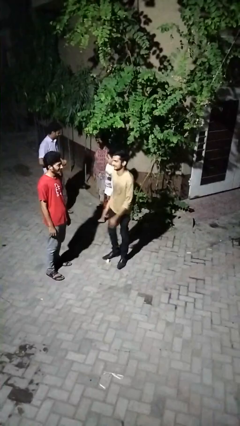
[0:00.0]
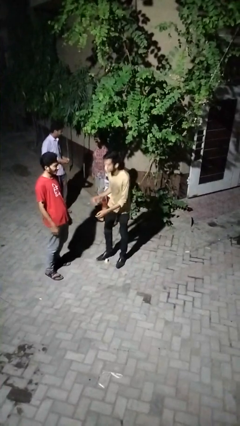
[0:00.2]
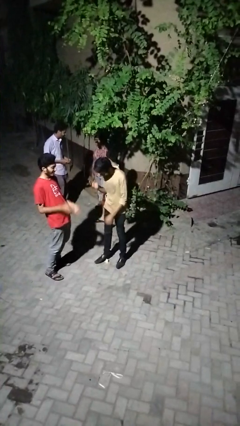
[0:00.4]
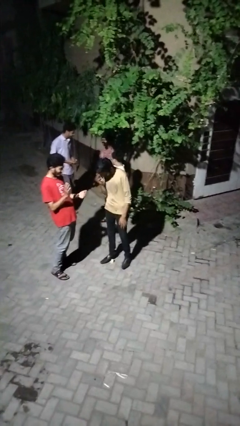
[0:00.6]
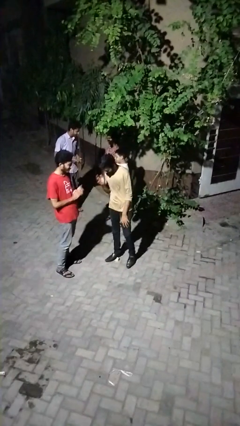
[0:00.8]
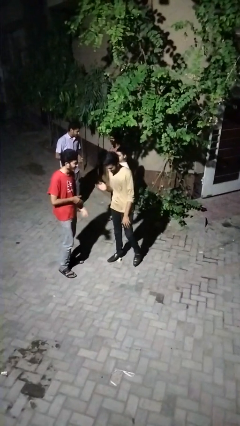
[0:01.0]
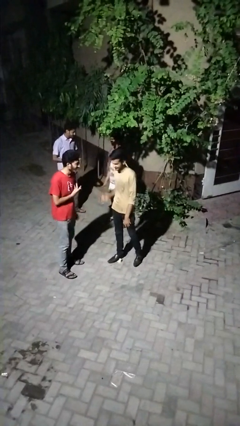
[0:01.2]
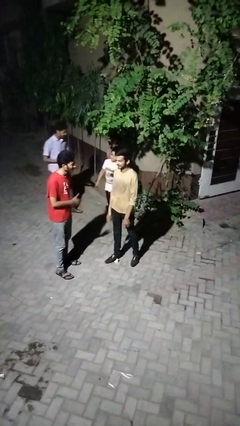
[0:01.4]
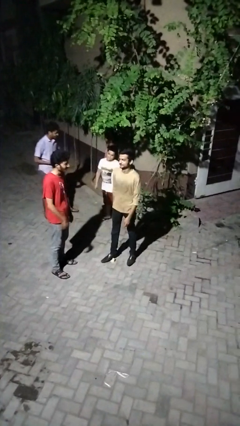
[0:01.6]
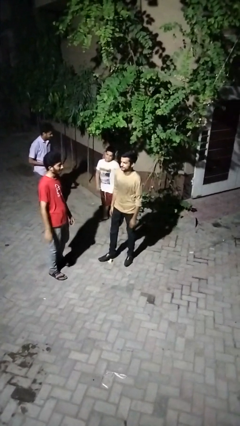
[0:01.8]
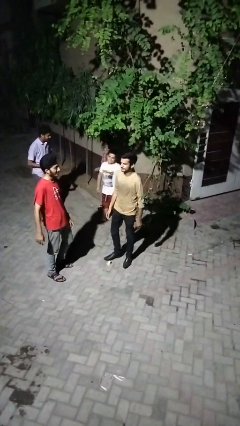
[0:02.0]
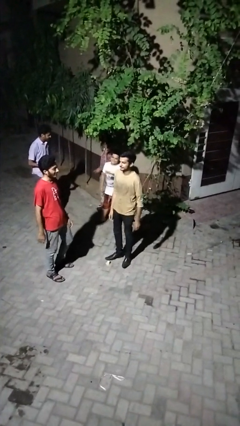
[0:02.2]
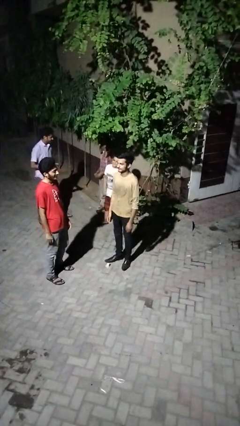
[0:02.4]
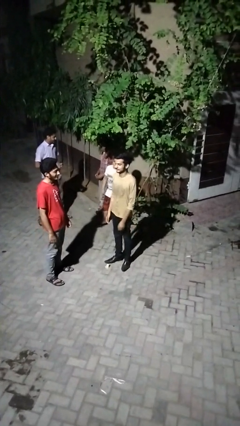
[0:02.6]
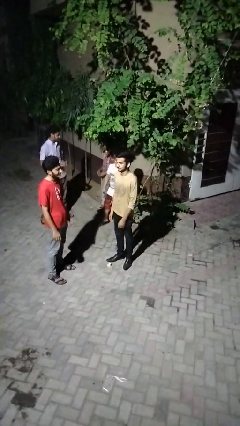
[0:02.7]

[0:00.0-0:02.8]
person laughs with person

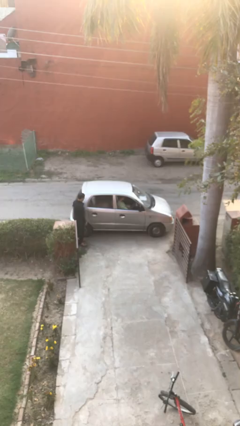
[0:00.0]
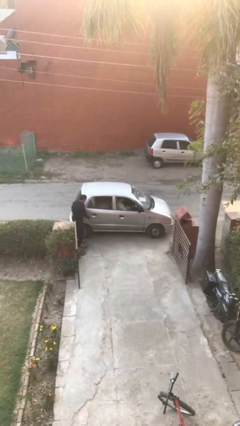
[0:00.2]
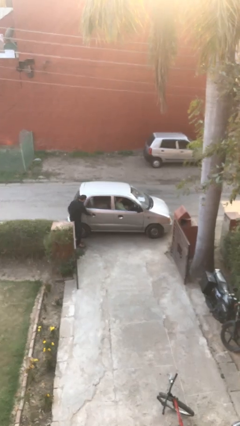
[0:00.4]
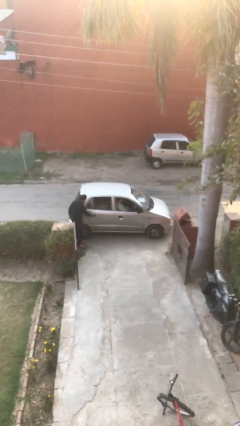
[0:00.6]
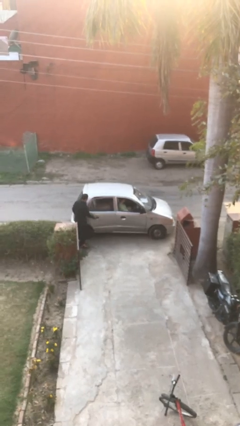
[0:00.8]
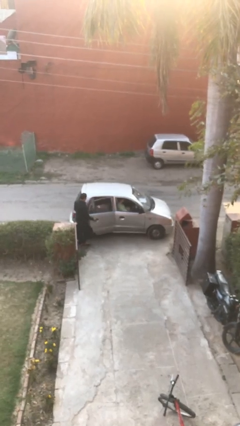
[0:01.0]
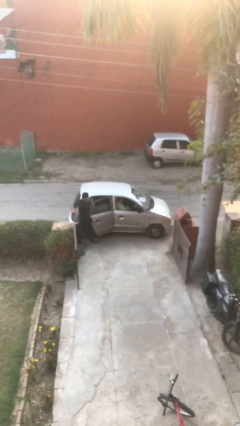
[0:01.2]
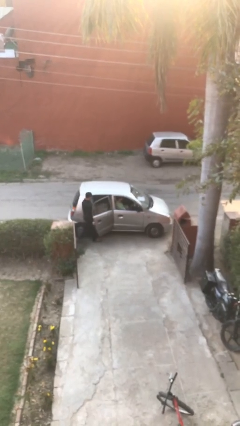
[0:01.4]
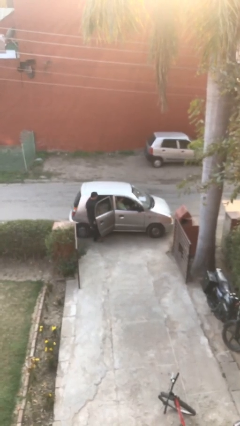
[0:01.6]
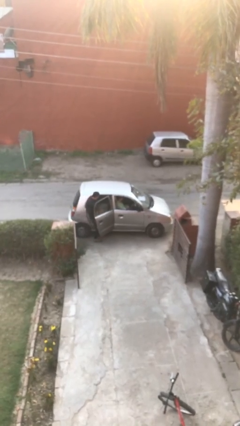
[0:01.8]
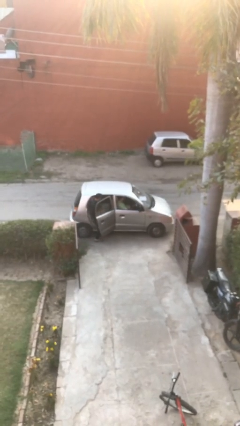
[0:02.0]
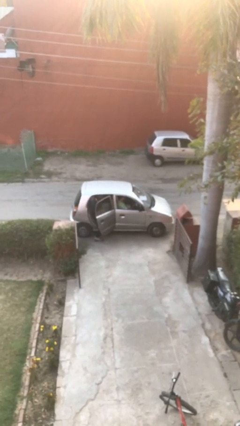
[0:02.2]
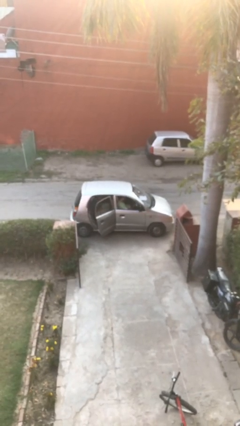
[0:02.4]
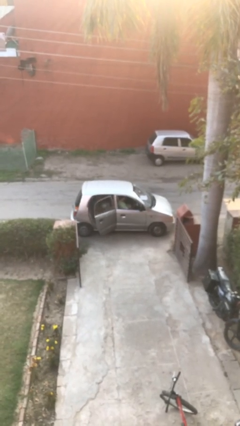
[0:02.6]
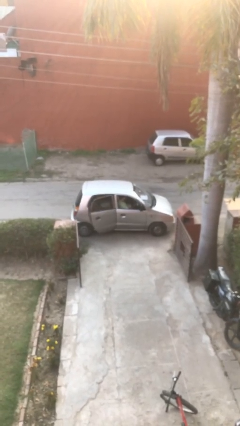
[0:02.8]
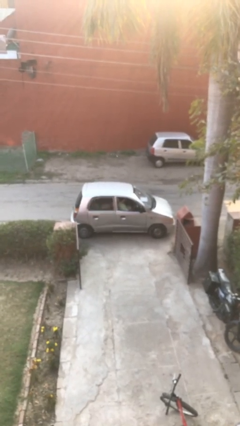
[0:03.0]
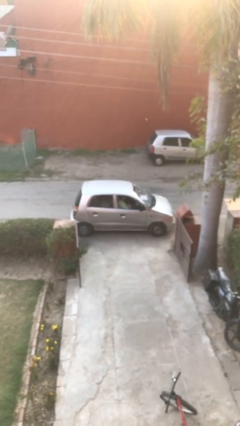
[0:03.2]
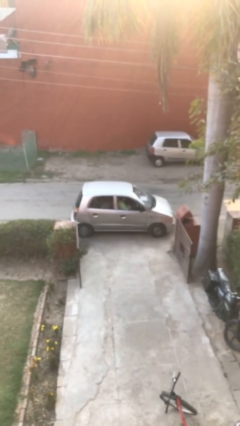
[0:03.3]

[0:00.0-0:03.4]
car picks up person

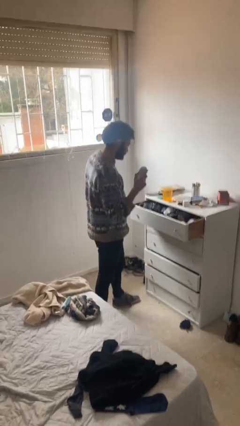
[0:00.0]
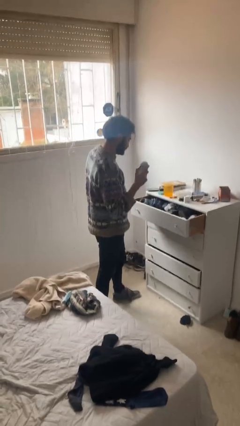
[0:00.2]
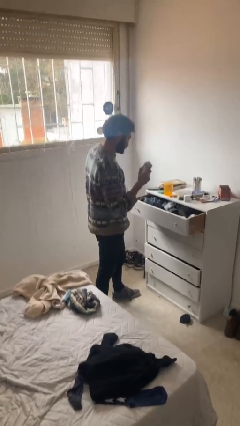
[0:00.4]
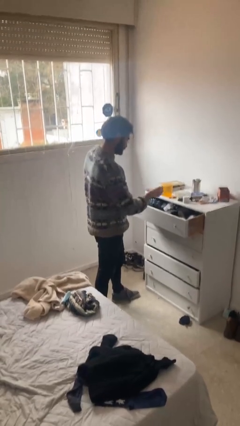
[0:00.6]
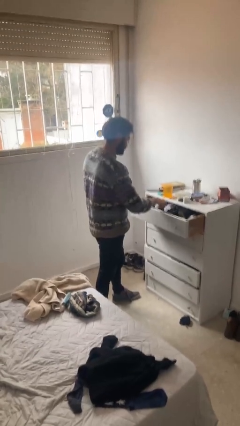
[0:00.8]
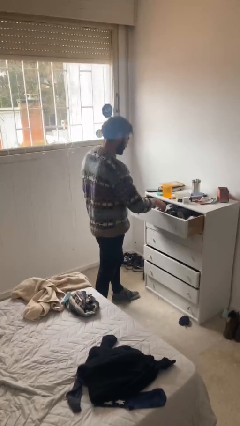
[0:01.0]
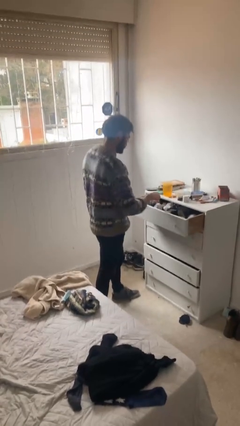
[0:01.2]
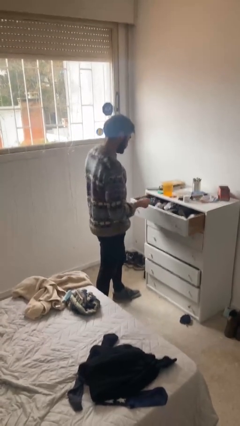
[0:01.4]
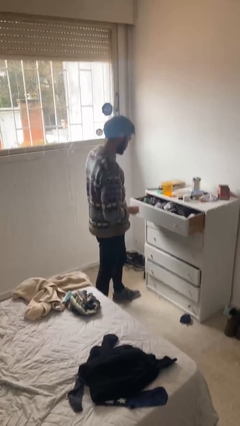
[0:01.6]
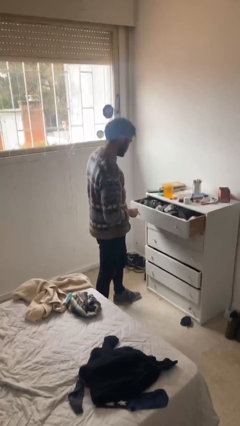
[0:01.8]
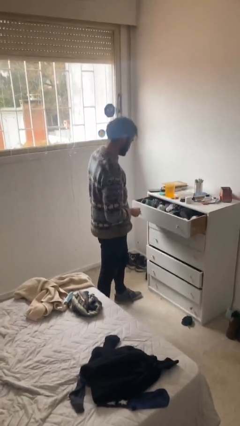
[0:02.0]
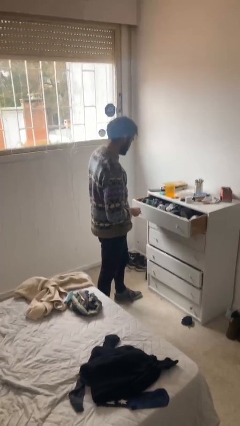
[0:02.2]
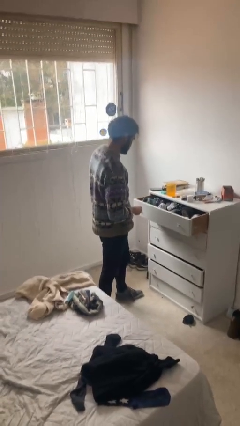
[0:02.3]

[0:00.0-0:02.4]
person puts clothes into dresser

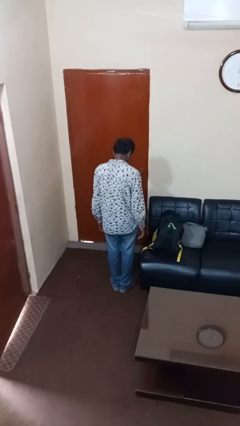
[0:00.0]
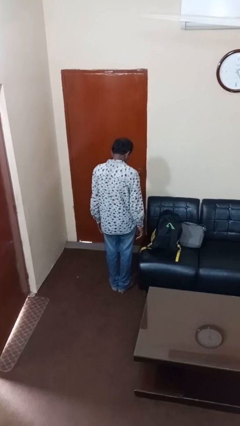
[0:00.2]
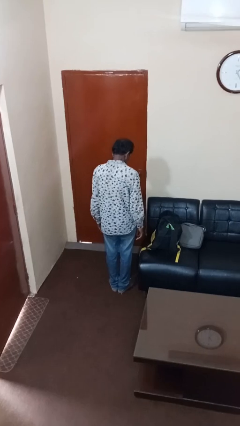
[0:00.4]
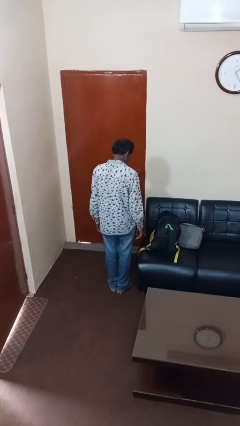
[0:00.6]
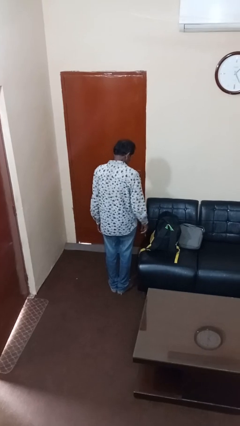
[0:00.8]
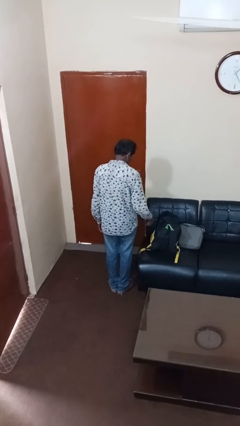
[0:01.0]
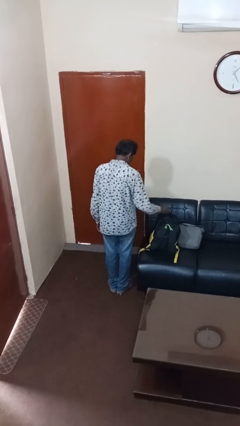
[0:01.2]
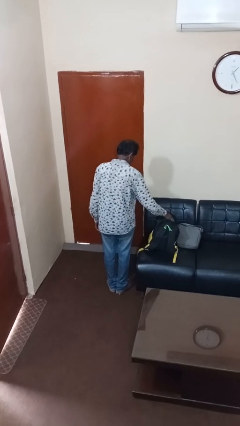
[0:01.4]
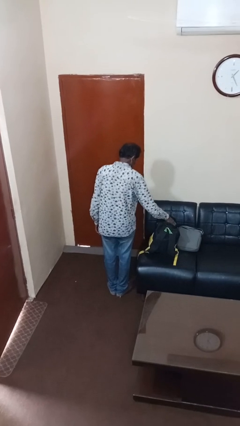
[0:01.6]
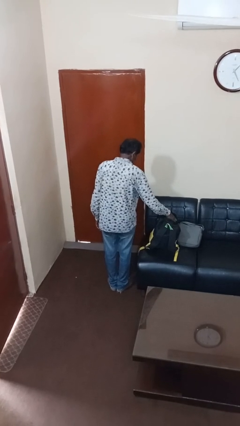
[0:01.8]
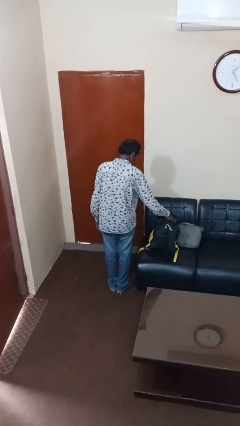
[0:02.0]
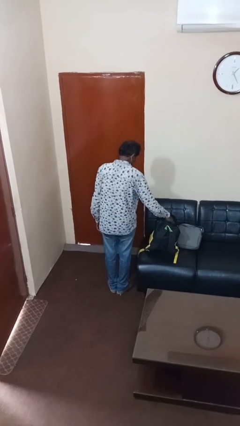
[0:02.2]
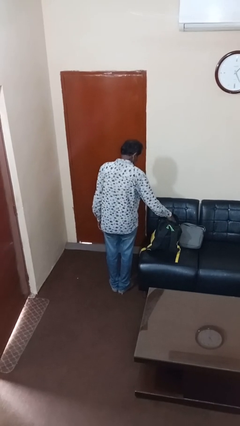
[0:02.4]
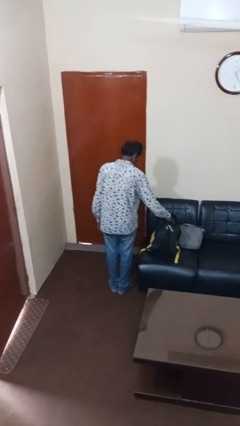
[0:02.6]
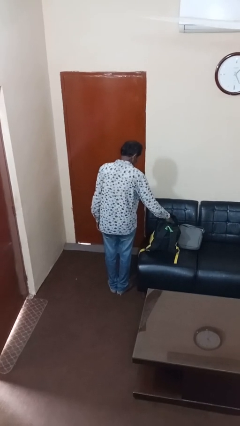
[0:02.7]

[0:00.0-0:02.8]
person searches in backpack

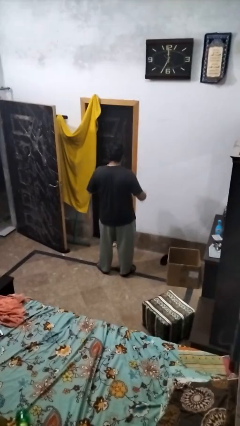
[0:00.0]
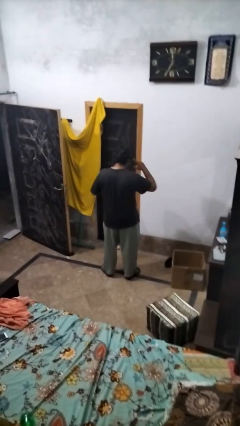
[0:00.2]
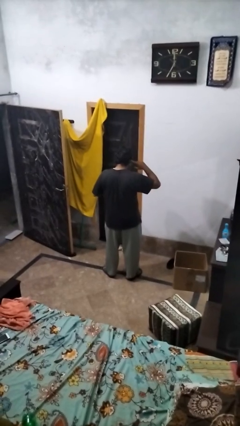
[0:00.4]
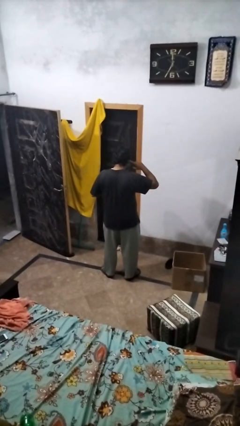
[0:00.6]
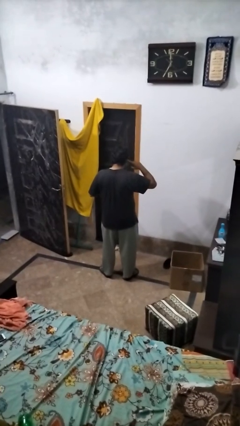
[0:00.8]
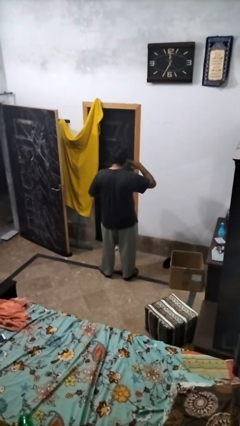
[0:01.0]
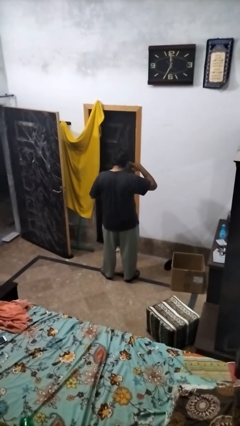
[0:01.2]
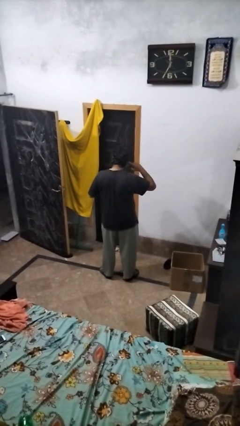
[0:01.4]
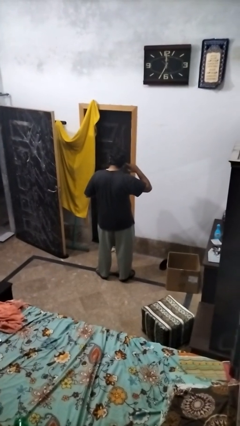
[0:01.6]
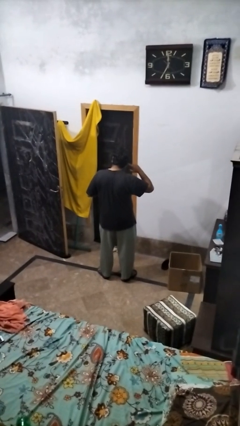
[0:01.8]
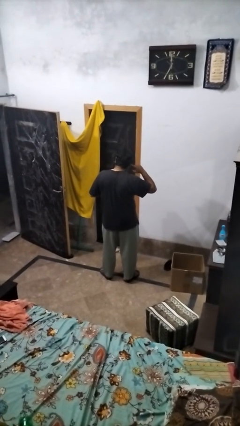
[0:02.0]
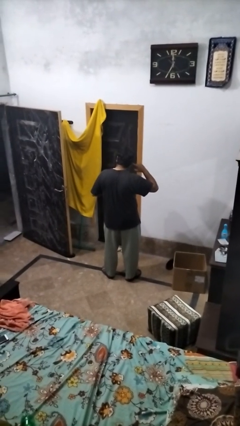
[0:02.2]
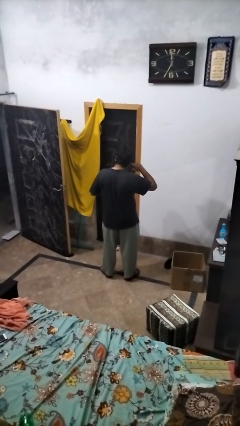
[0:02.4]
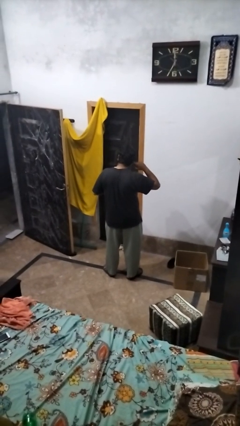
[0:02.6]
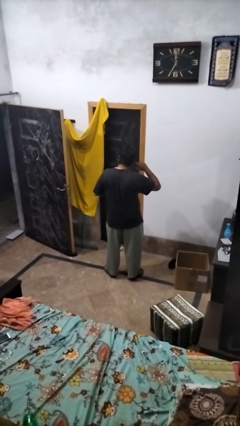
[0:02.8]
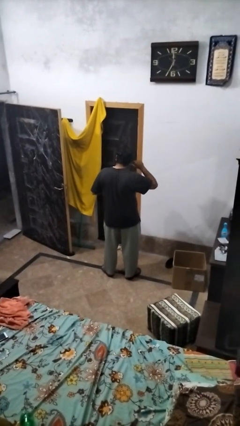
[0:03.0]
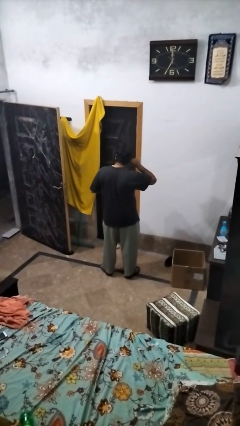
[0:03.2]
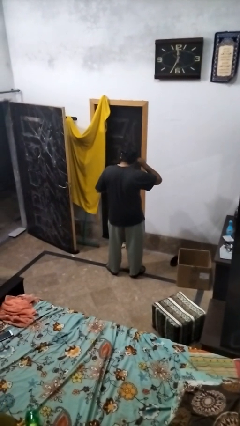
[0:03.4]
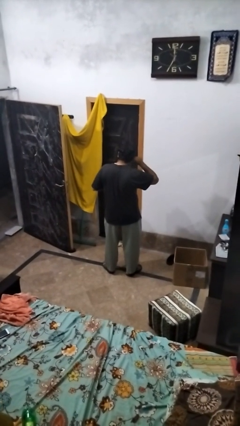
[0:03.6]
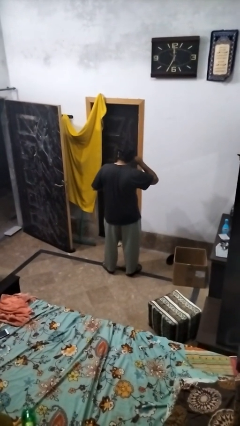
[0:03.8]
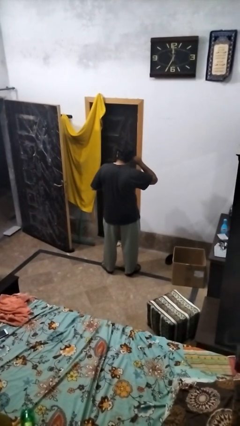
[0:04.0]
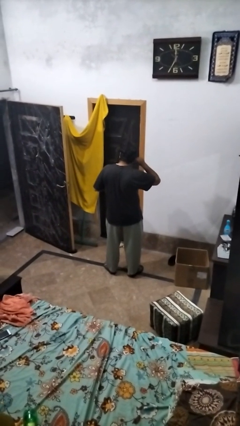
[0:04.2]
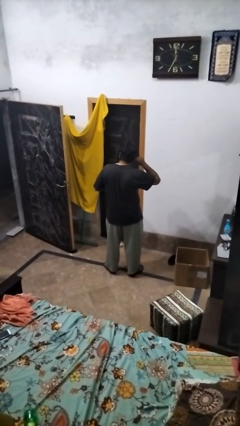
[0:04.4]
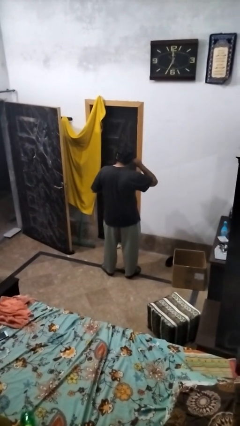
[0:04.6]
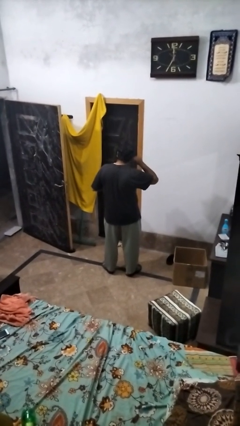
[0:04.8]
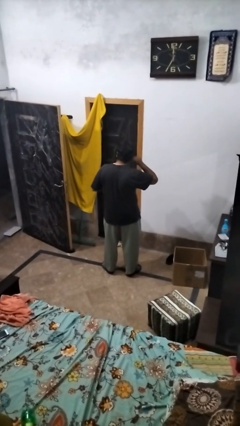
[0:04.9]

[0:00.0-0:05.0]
person gestures listen closely

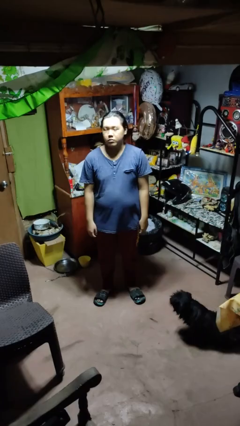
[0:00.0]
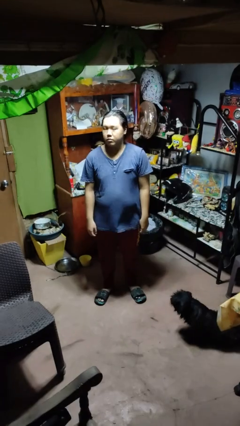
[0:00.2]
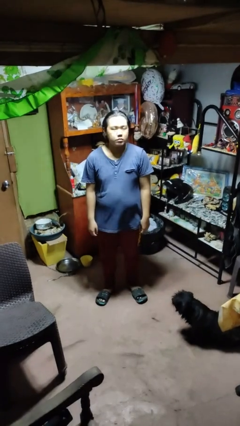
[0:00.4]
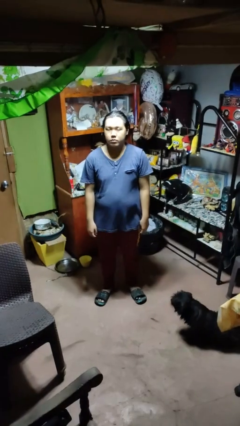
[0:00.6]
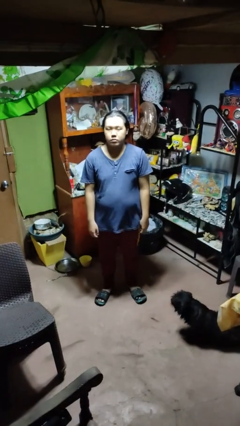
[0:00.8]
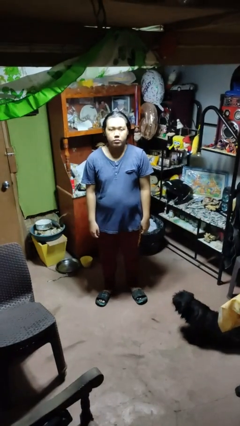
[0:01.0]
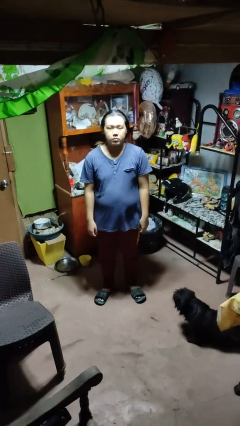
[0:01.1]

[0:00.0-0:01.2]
person shakes head
